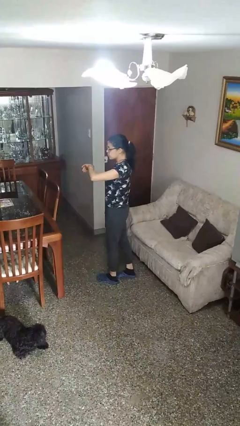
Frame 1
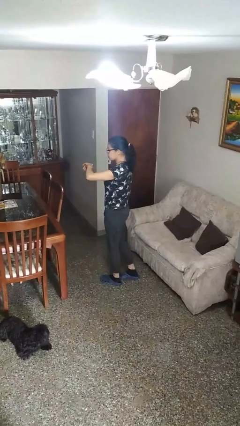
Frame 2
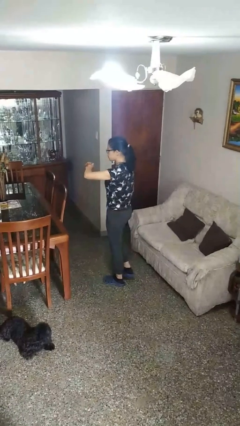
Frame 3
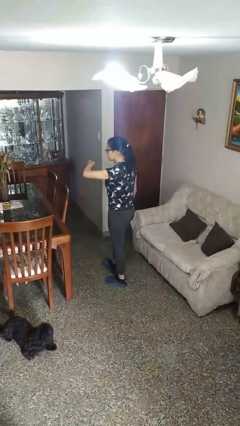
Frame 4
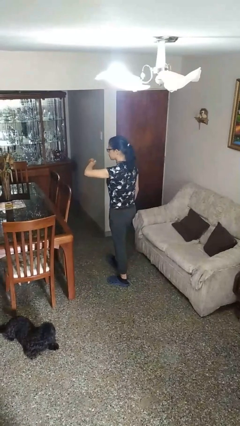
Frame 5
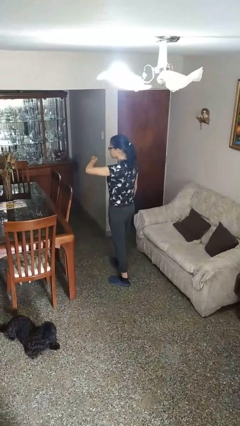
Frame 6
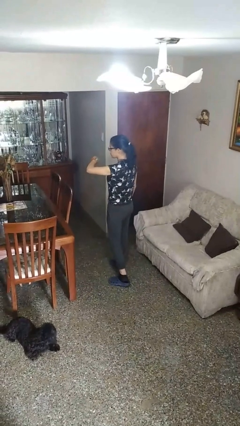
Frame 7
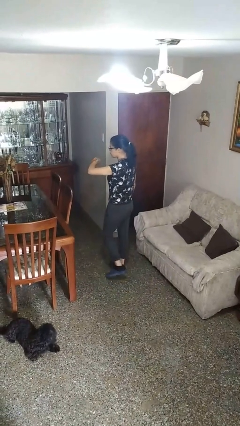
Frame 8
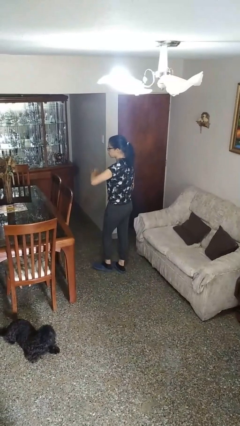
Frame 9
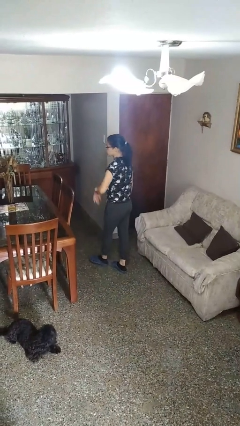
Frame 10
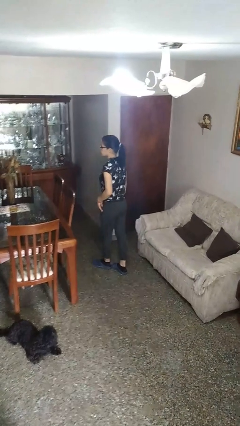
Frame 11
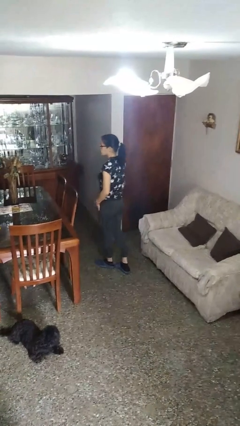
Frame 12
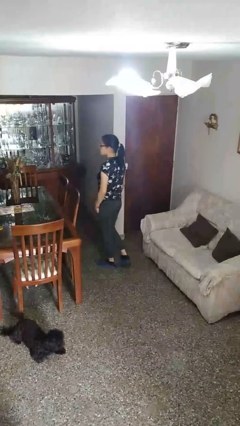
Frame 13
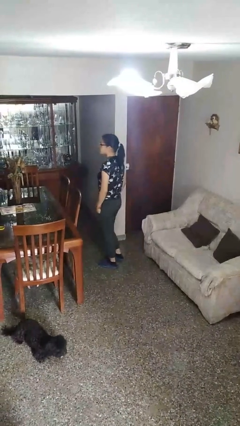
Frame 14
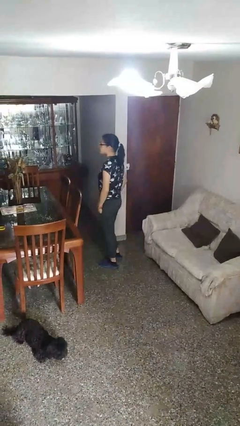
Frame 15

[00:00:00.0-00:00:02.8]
person looks at wristwatch

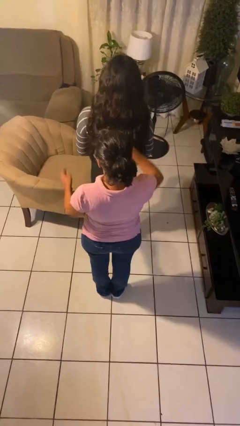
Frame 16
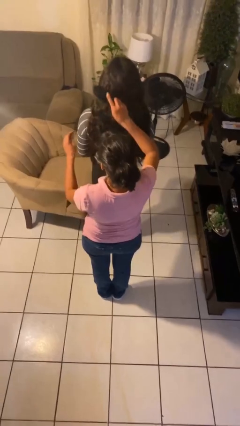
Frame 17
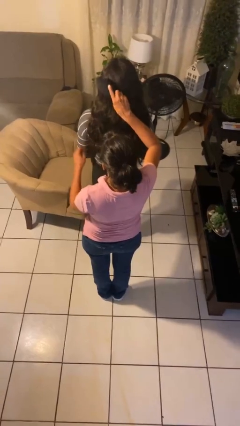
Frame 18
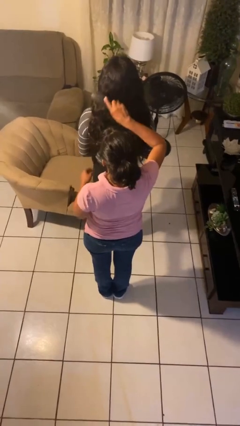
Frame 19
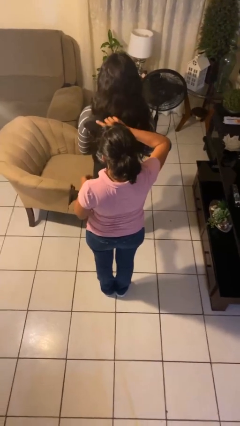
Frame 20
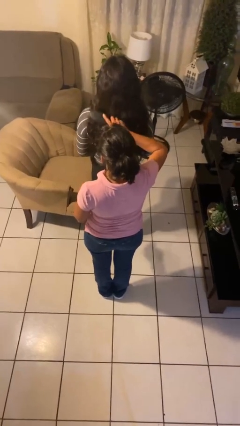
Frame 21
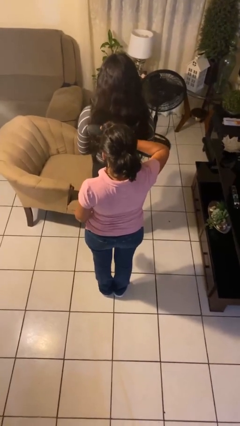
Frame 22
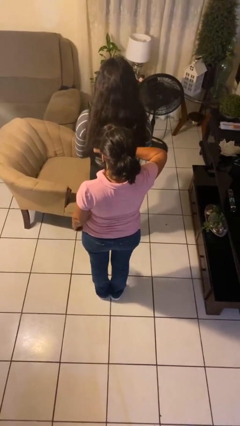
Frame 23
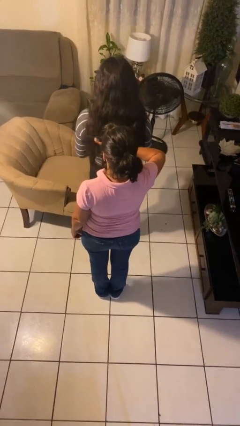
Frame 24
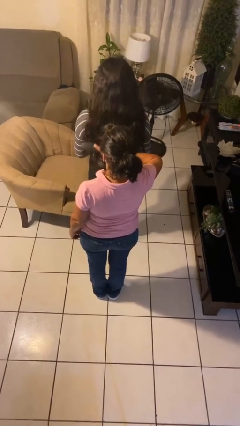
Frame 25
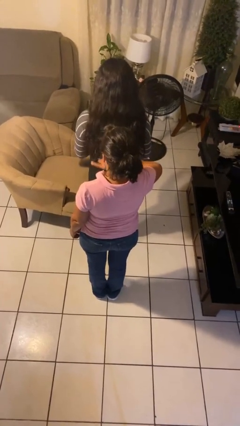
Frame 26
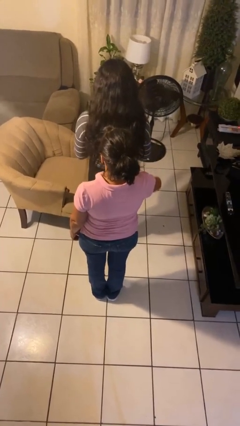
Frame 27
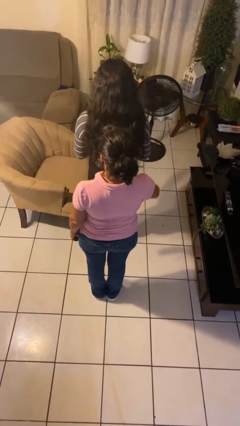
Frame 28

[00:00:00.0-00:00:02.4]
person brushes hair of person

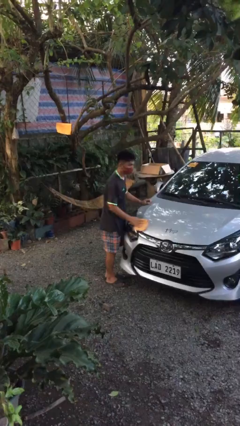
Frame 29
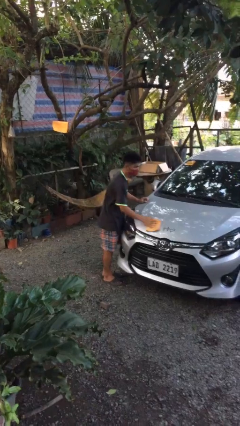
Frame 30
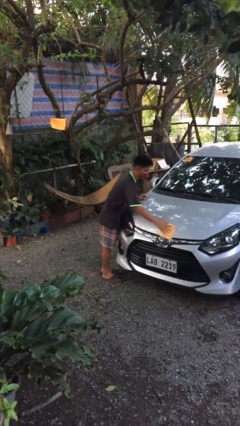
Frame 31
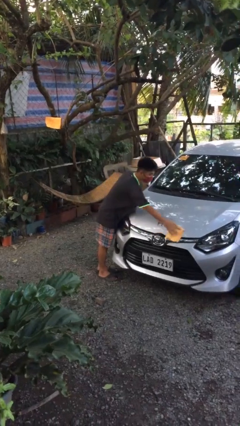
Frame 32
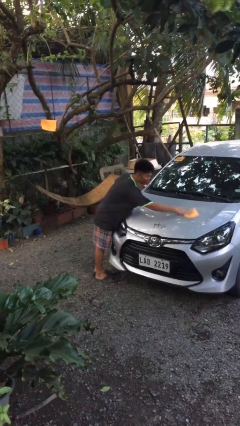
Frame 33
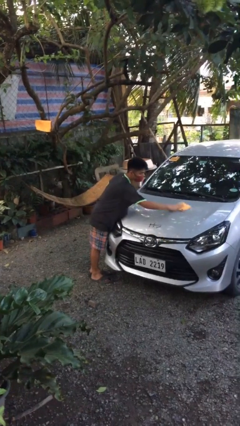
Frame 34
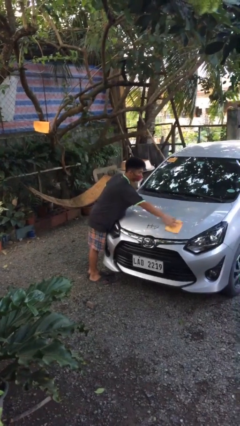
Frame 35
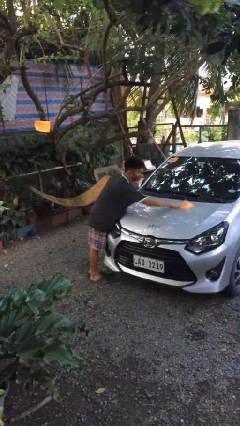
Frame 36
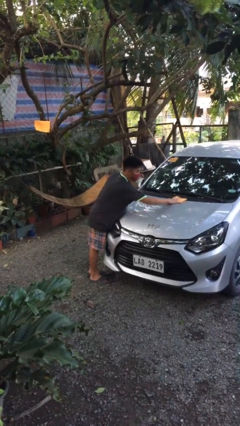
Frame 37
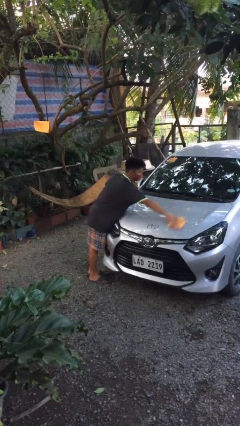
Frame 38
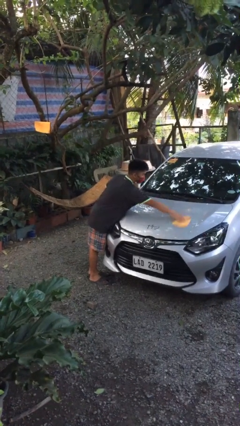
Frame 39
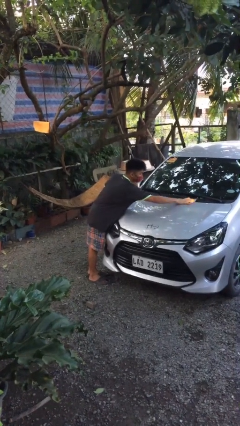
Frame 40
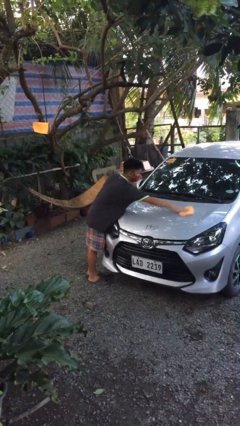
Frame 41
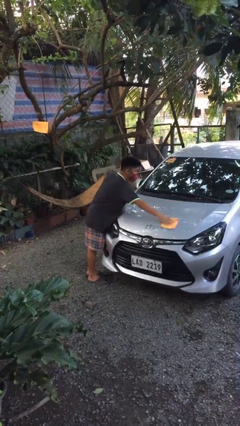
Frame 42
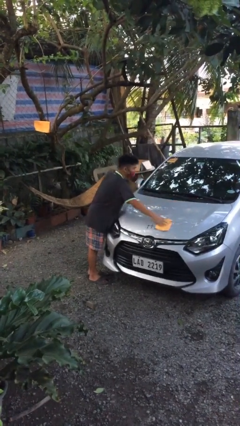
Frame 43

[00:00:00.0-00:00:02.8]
person polishes car with rag

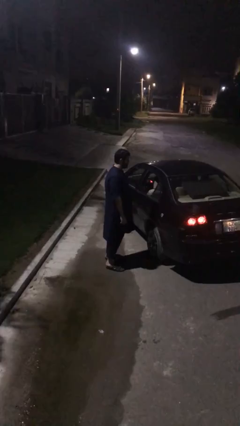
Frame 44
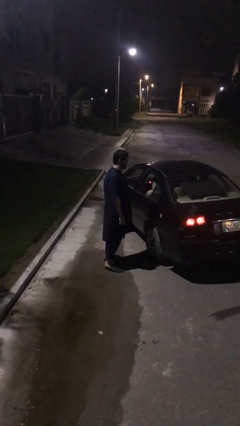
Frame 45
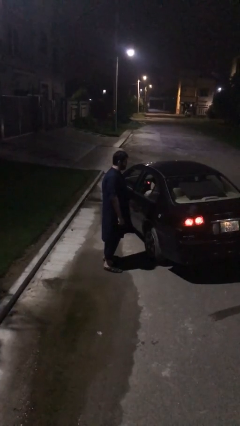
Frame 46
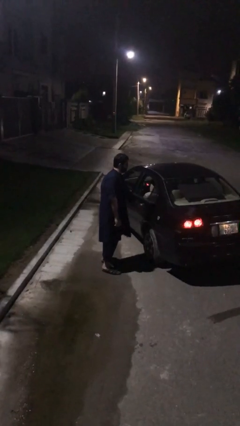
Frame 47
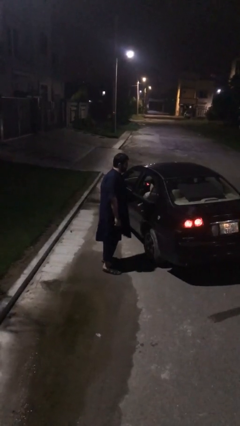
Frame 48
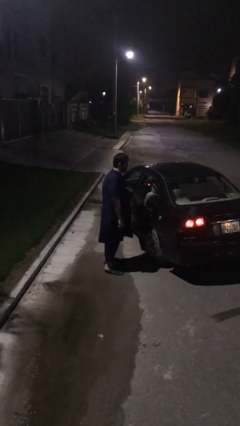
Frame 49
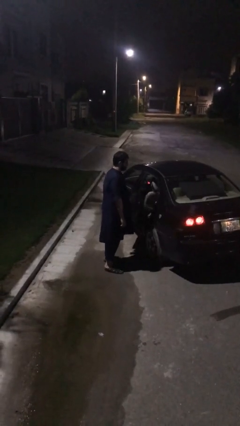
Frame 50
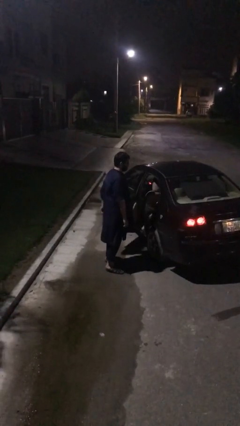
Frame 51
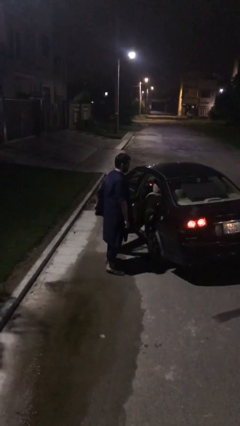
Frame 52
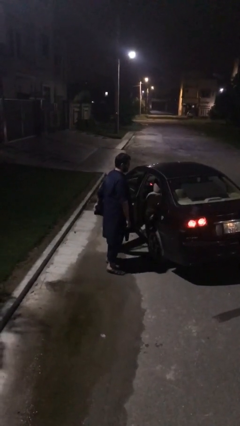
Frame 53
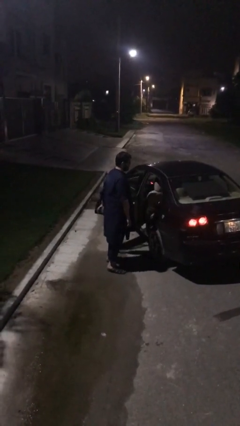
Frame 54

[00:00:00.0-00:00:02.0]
person opens car door

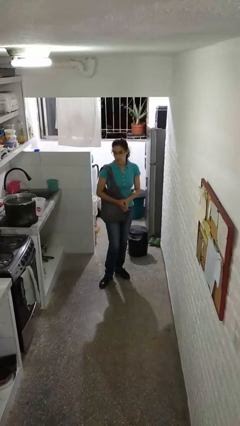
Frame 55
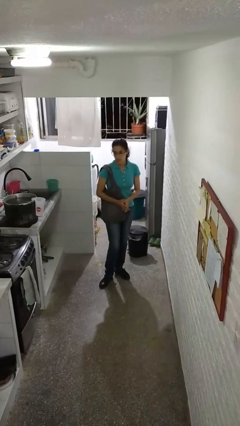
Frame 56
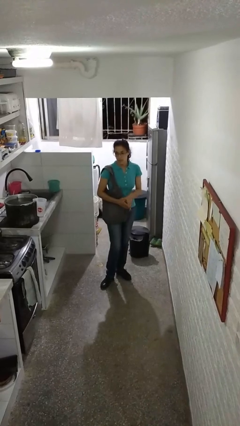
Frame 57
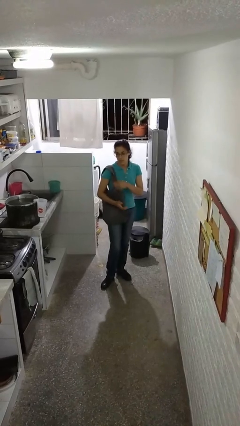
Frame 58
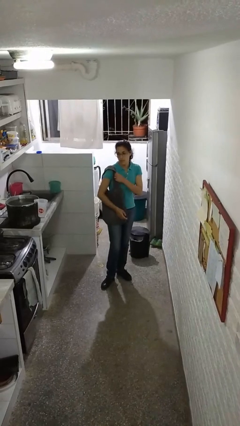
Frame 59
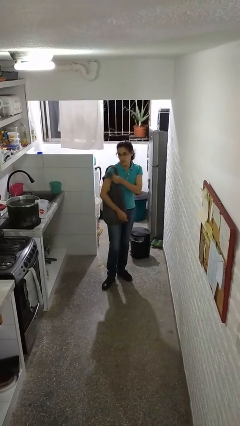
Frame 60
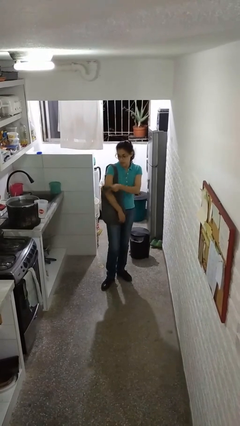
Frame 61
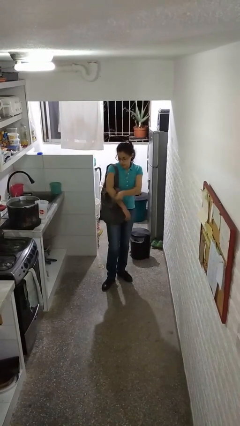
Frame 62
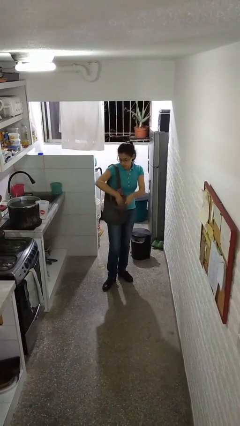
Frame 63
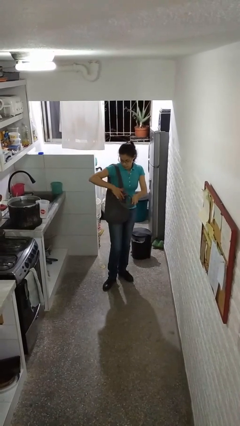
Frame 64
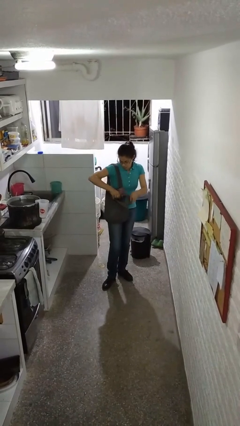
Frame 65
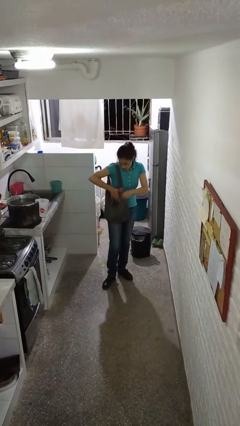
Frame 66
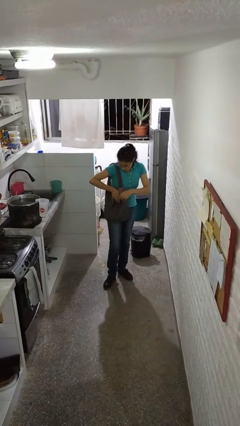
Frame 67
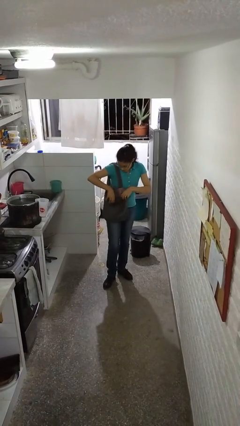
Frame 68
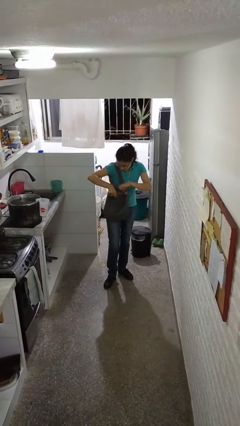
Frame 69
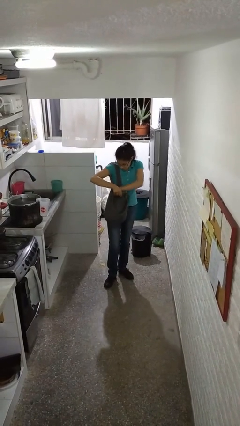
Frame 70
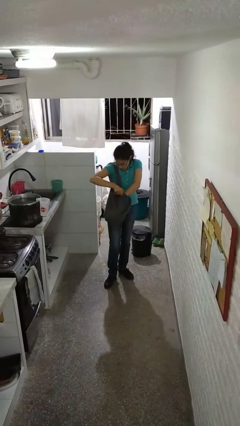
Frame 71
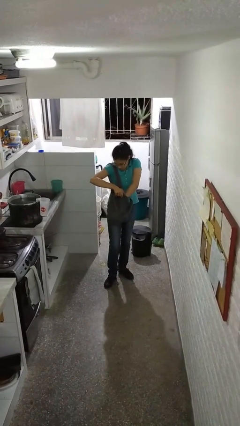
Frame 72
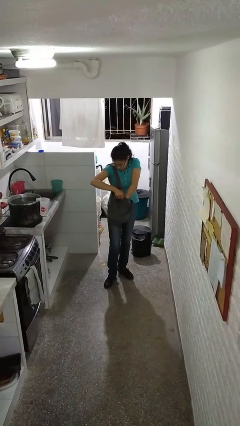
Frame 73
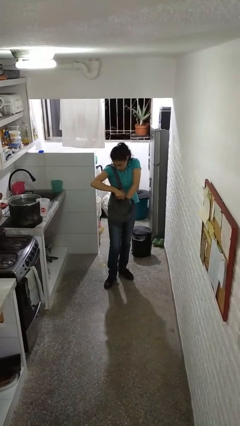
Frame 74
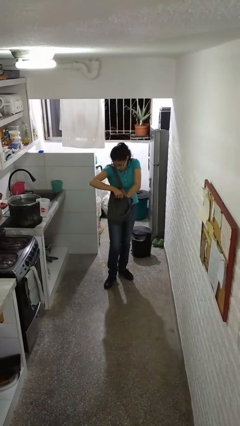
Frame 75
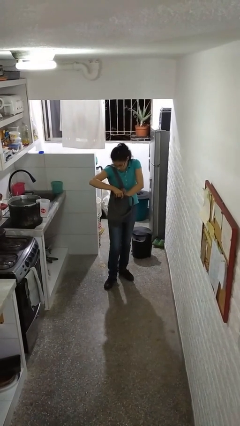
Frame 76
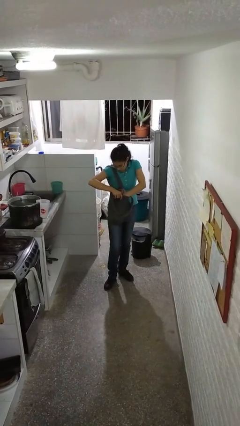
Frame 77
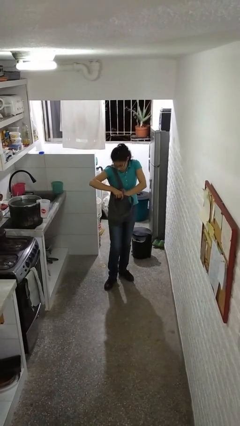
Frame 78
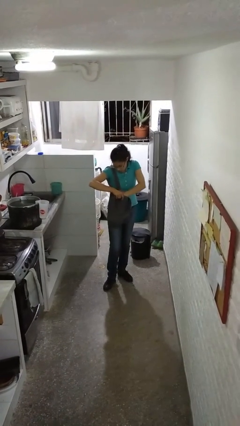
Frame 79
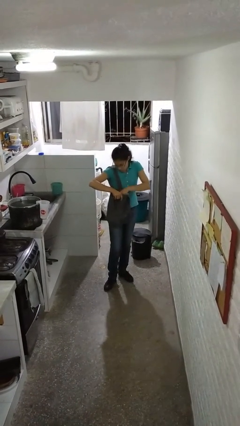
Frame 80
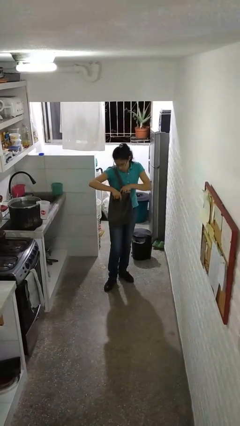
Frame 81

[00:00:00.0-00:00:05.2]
person searches in purse

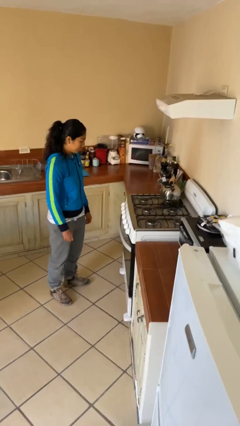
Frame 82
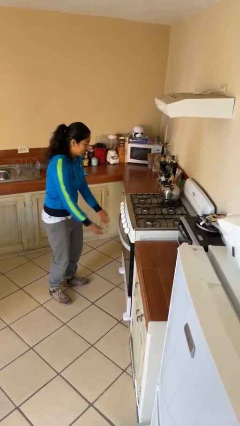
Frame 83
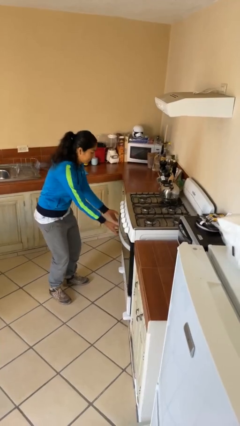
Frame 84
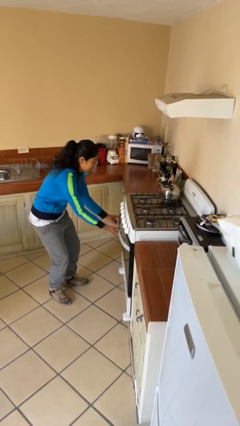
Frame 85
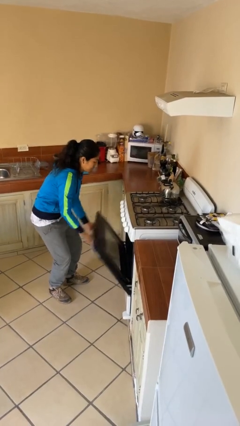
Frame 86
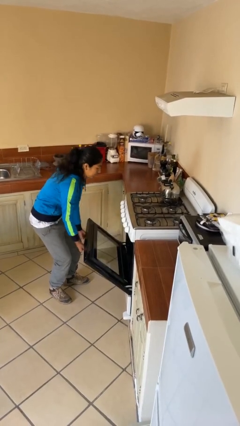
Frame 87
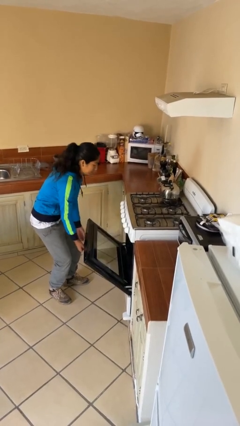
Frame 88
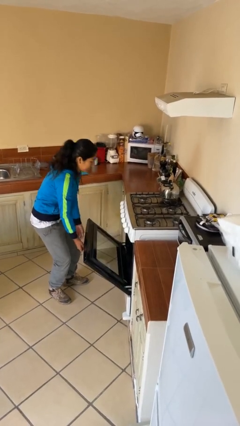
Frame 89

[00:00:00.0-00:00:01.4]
person opens oven door

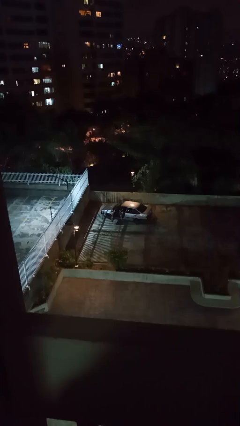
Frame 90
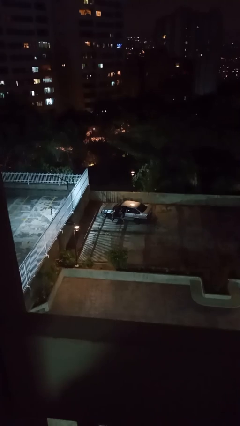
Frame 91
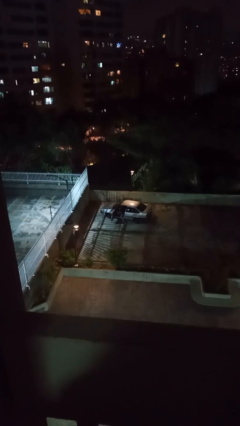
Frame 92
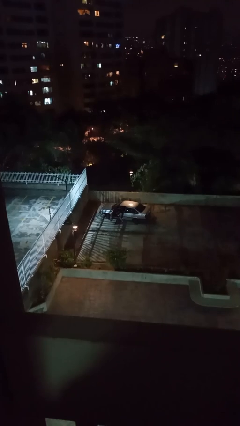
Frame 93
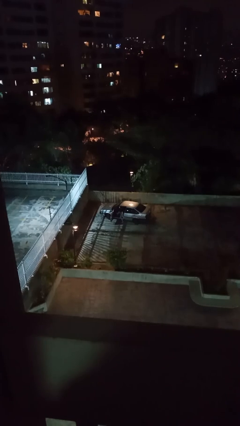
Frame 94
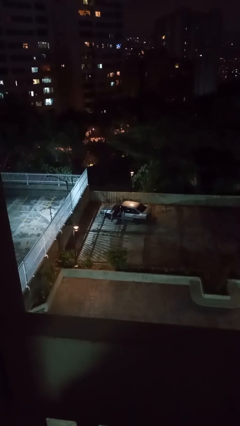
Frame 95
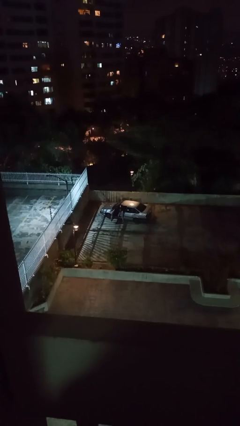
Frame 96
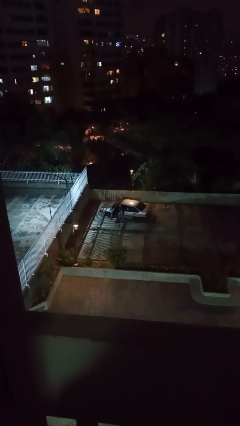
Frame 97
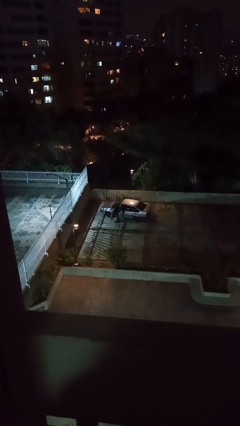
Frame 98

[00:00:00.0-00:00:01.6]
person exits car
